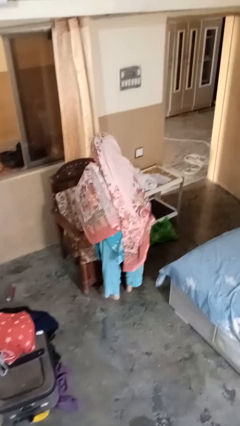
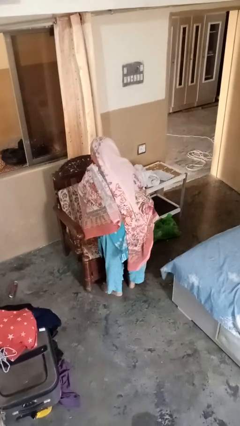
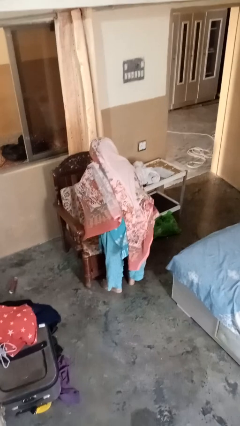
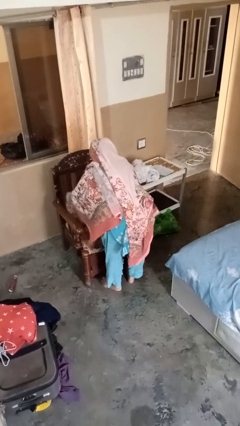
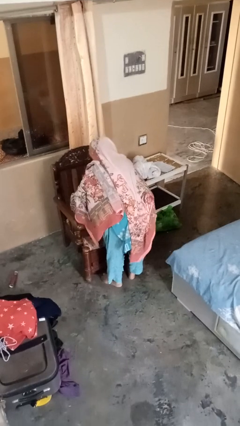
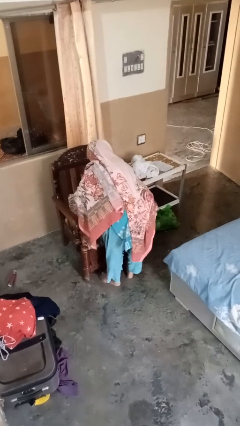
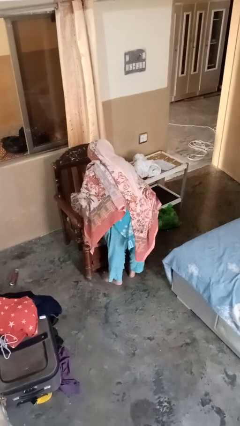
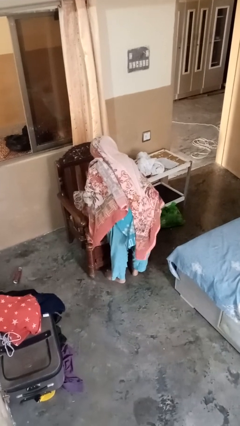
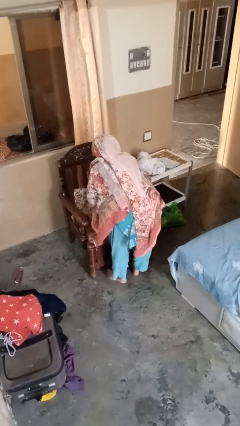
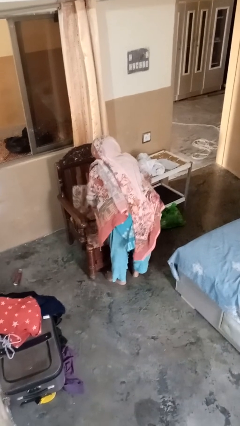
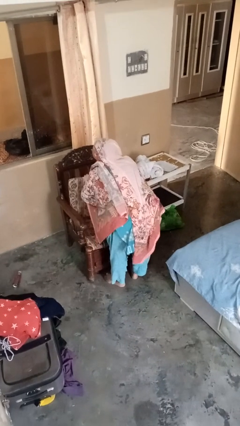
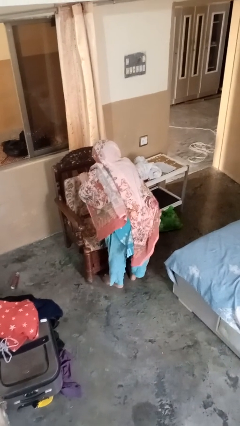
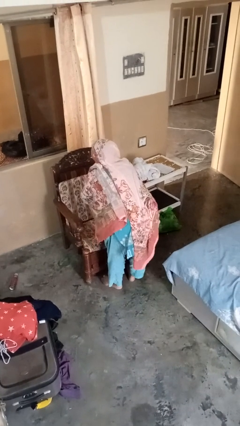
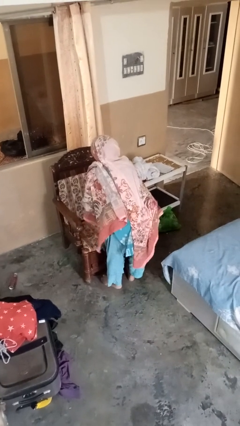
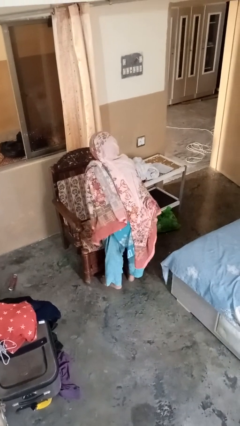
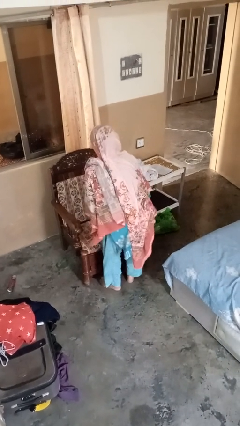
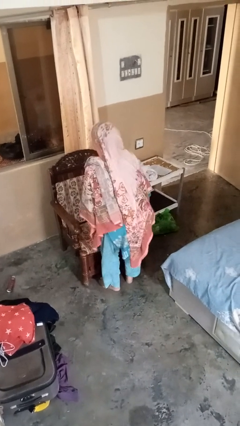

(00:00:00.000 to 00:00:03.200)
person searches in couch

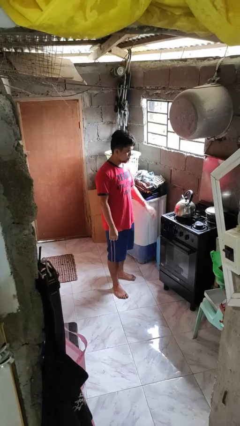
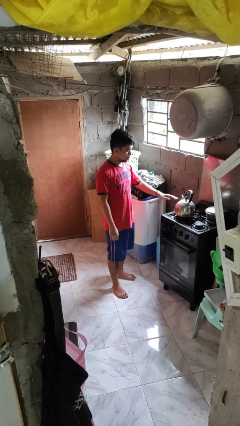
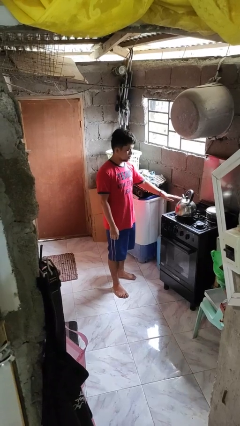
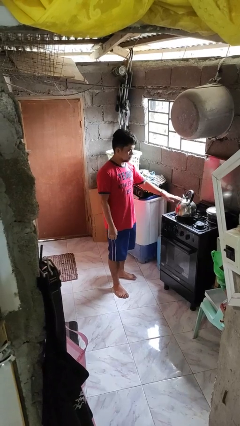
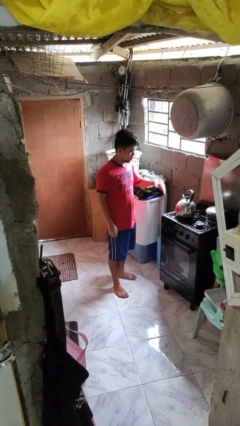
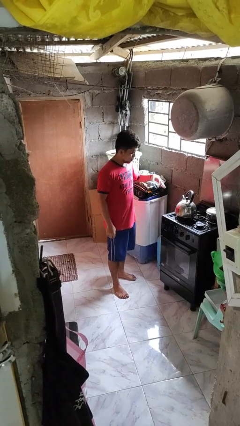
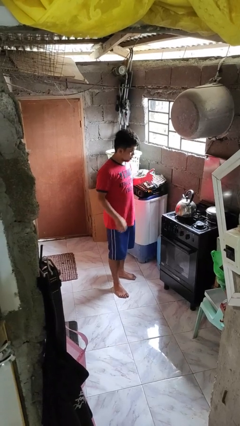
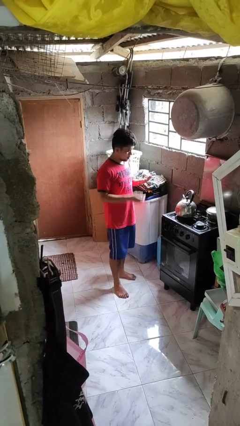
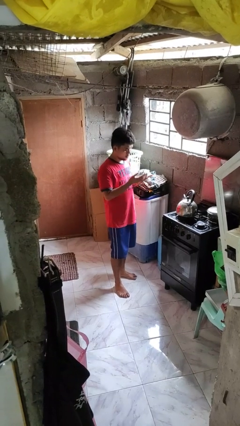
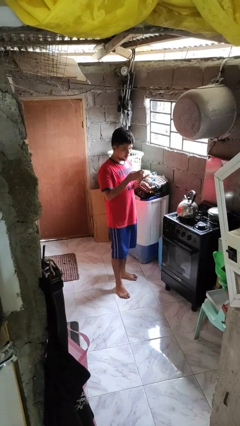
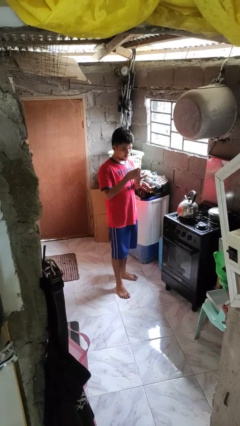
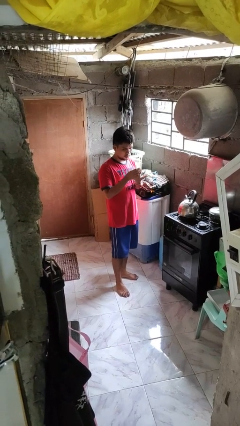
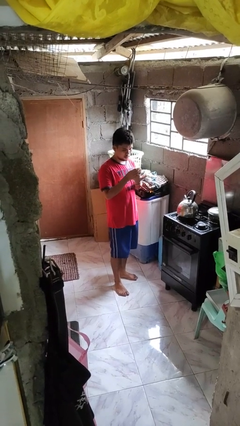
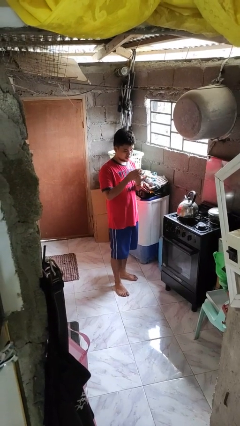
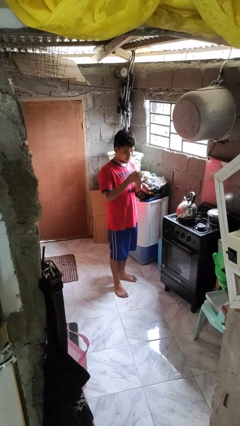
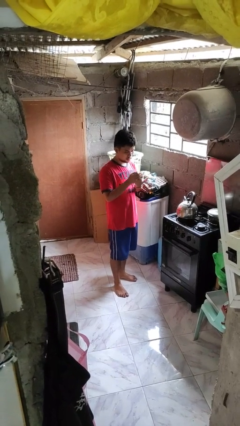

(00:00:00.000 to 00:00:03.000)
person burns hand

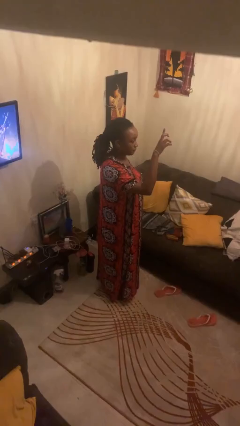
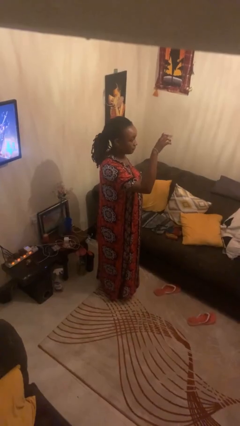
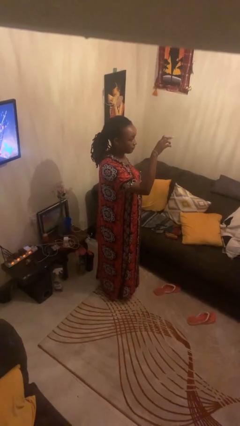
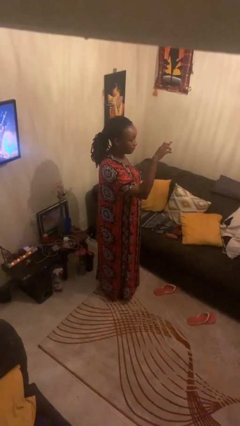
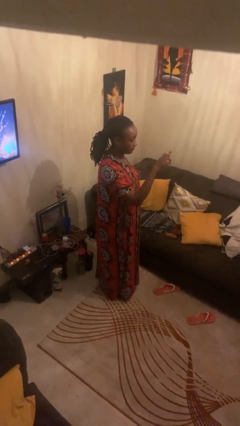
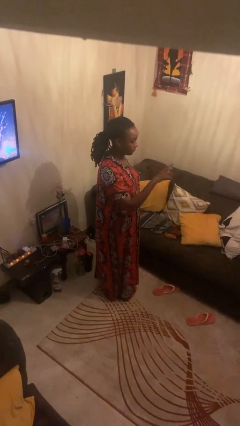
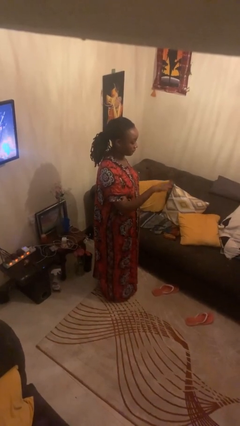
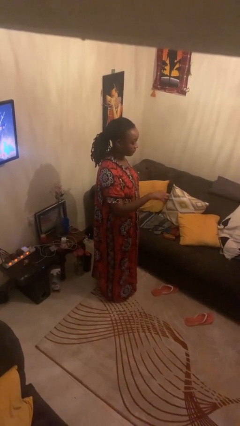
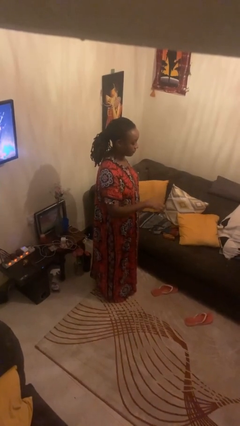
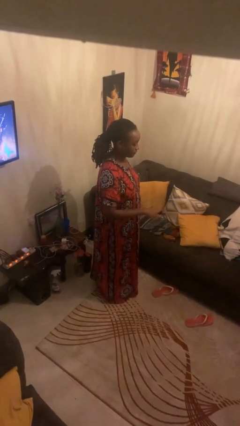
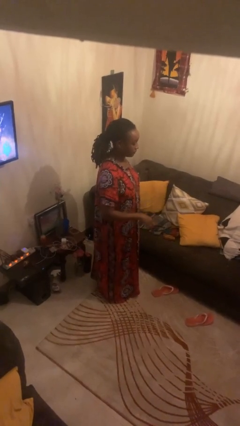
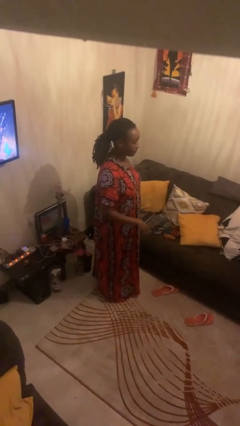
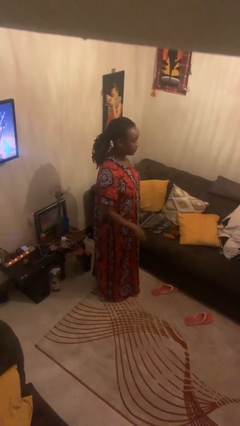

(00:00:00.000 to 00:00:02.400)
person gestures swipe down

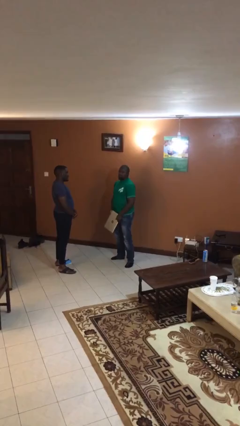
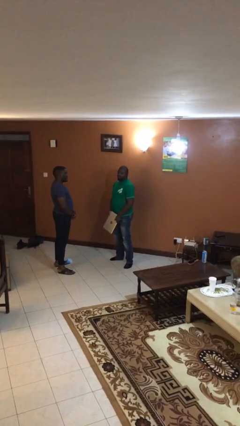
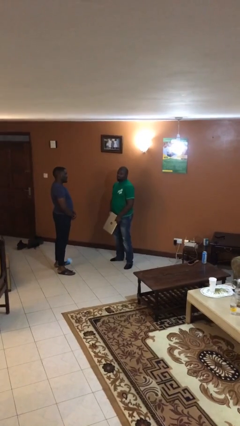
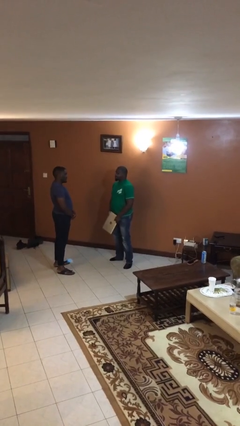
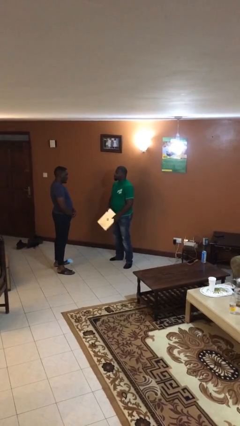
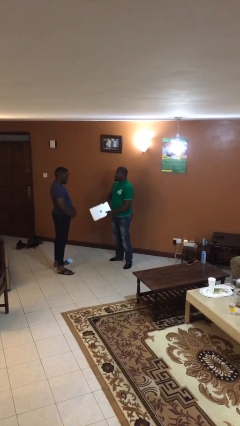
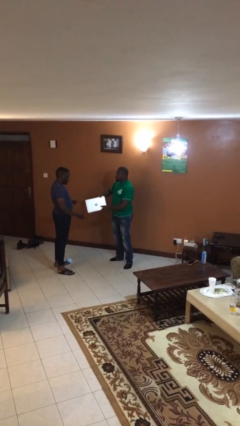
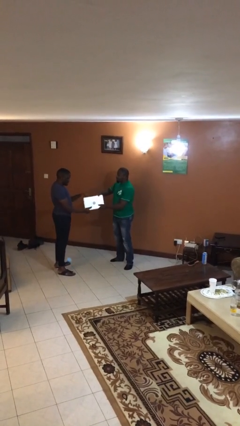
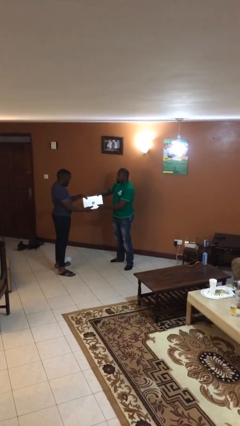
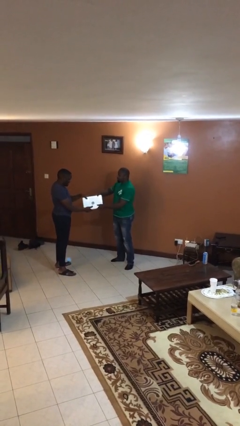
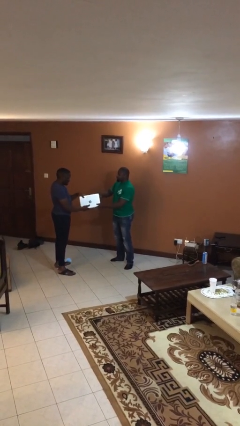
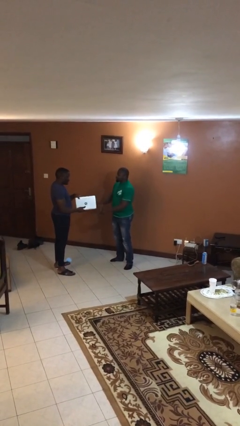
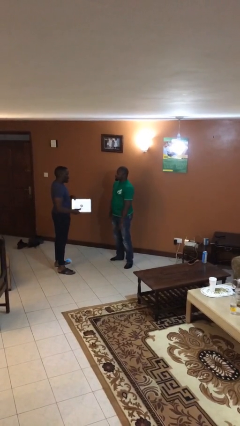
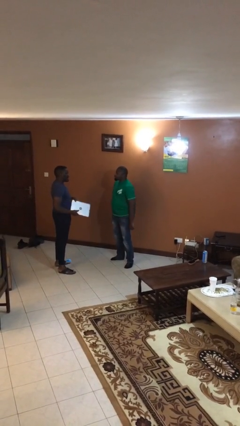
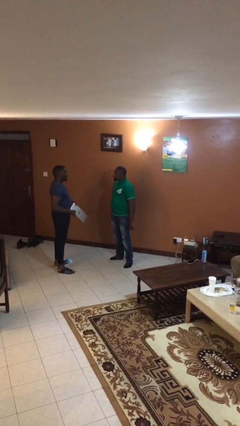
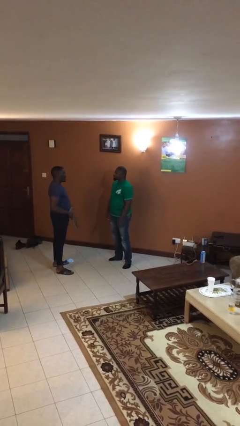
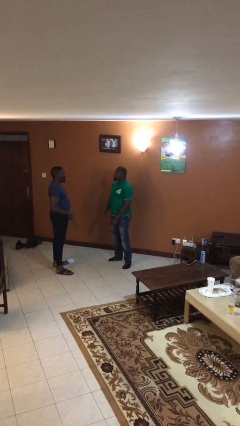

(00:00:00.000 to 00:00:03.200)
person transfers object to person

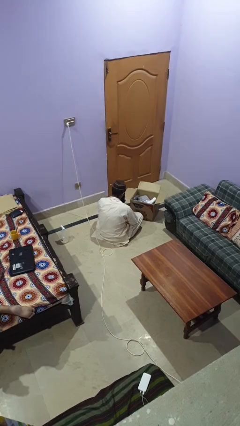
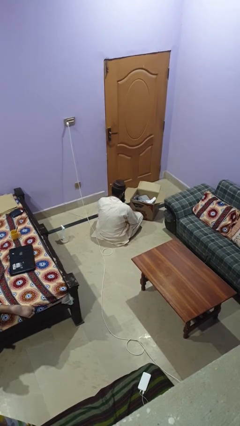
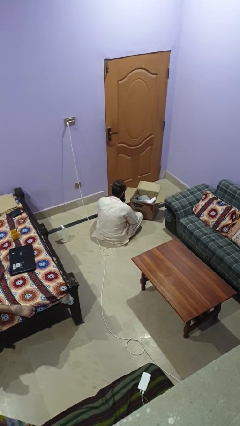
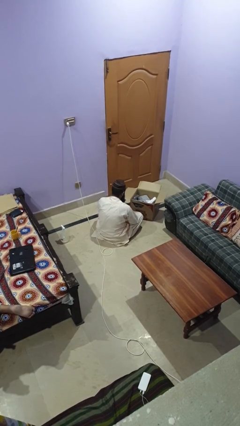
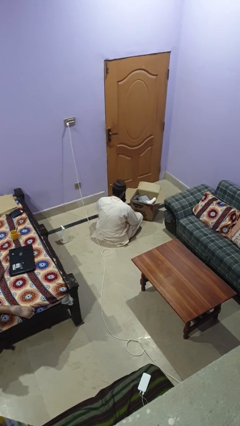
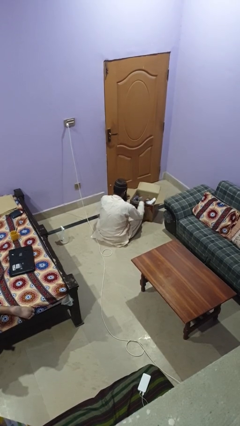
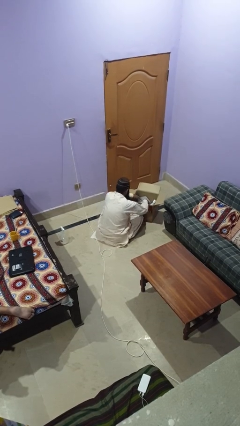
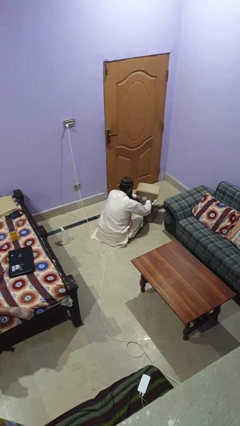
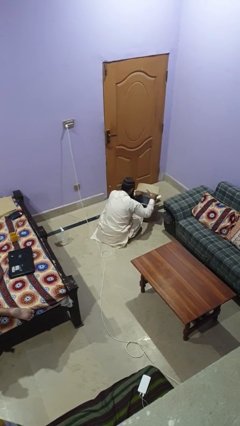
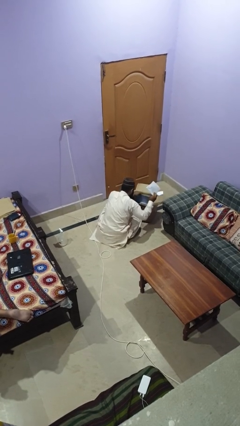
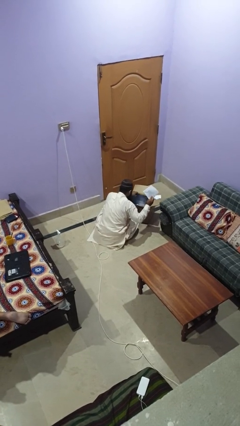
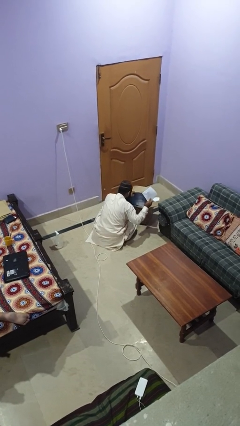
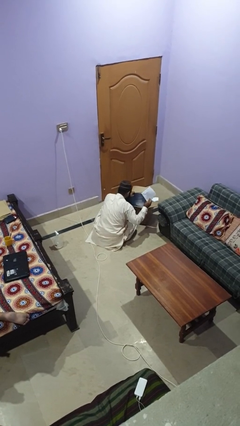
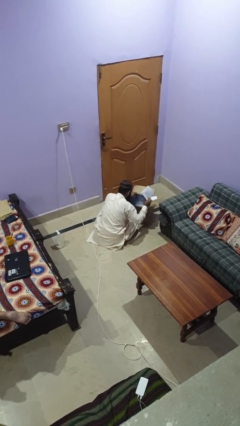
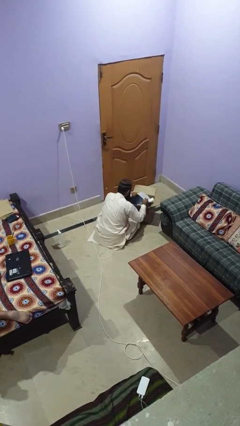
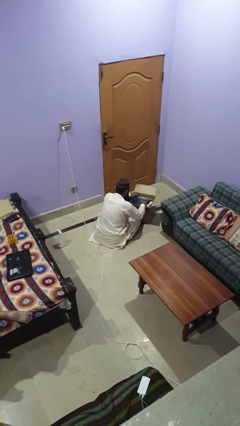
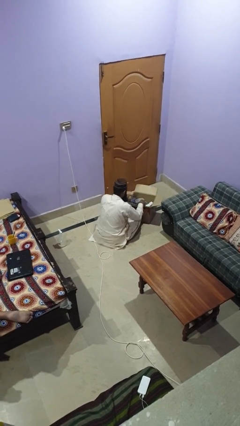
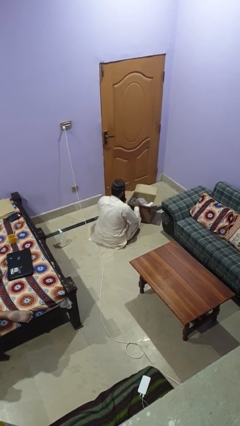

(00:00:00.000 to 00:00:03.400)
person searches in box

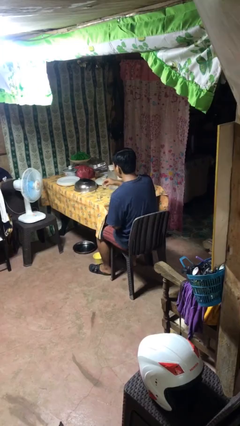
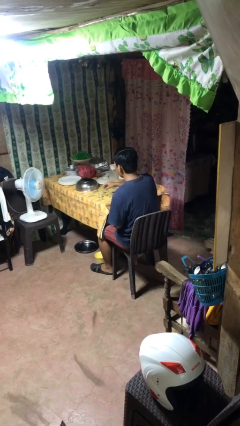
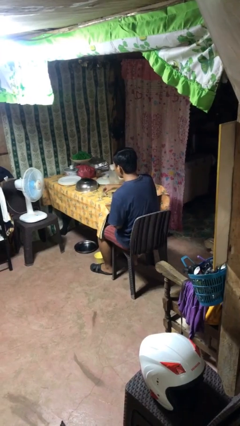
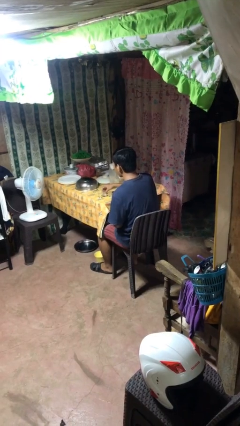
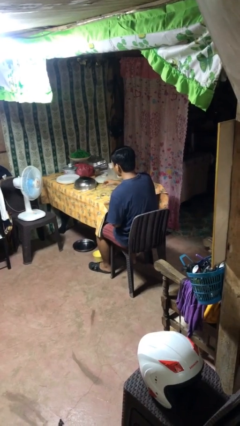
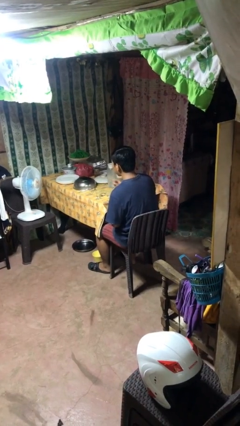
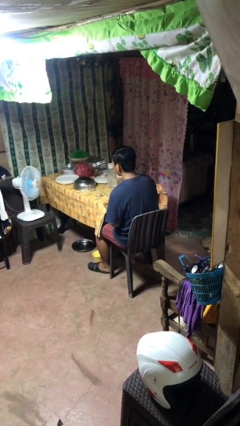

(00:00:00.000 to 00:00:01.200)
person puts down object on table

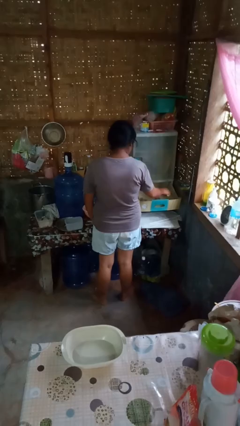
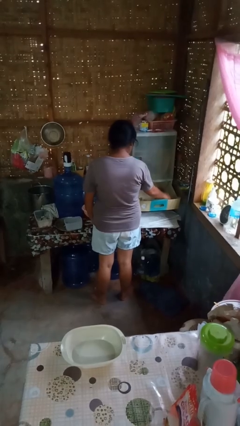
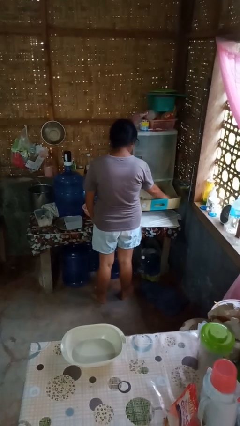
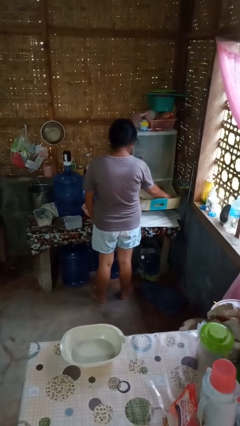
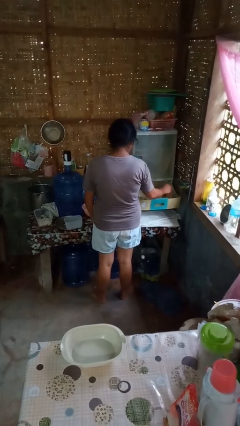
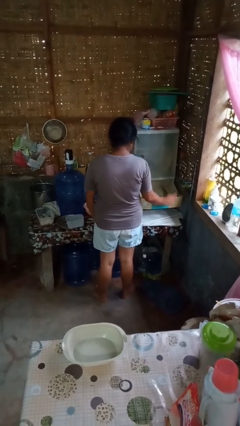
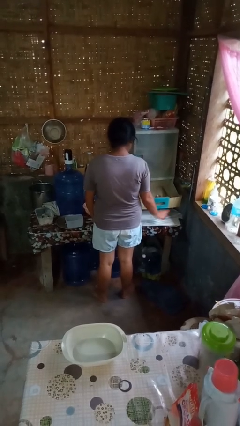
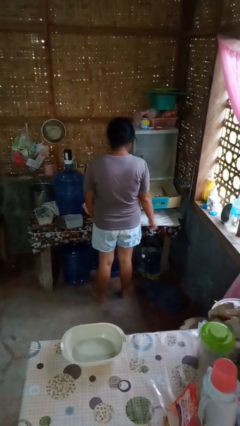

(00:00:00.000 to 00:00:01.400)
person puts object into kitchen drawer
